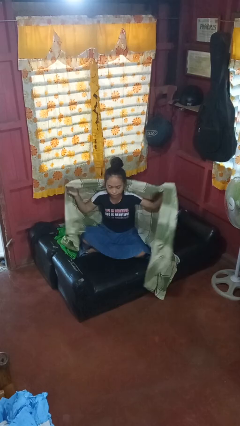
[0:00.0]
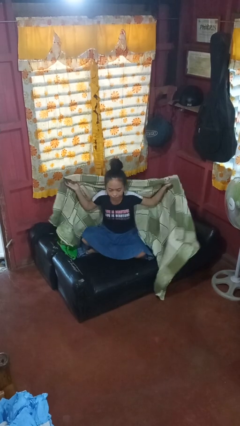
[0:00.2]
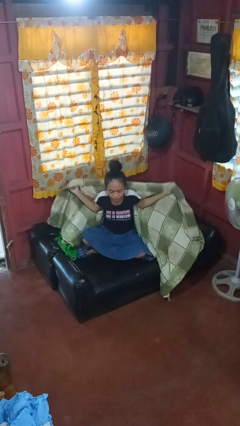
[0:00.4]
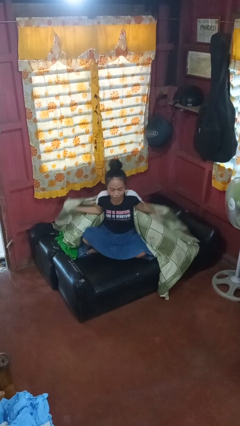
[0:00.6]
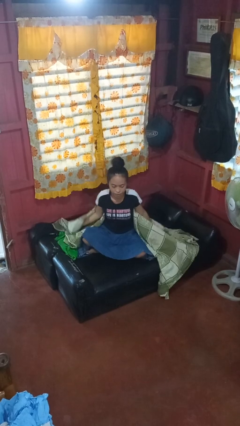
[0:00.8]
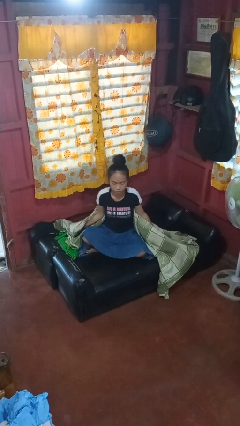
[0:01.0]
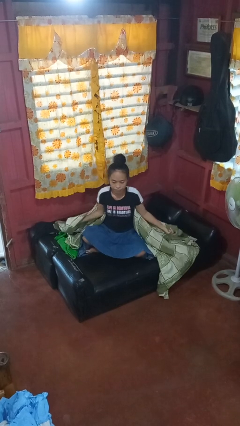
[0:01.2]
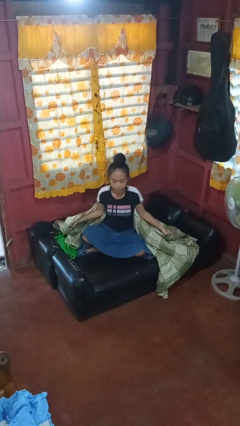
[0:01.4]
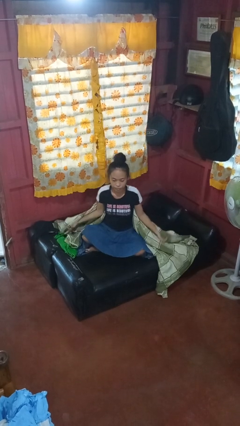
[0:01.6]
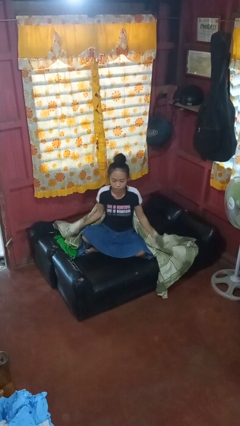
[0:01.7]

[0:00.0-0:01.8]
person uncovers with blanket

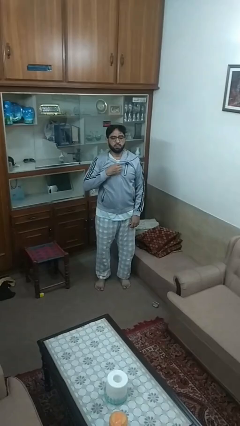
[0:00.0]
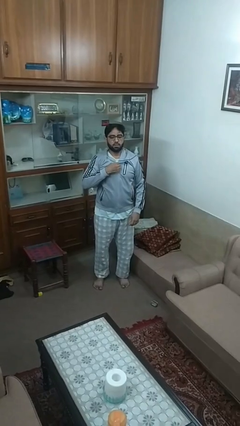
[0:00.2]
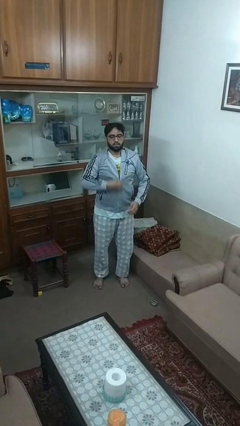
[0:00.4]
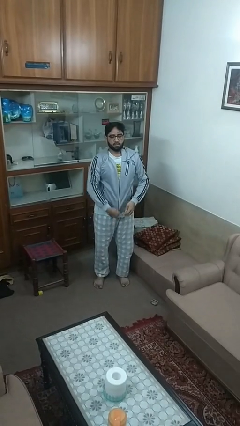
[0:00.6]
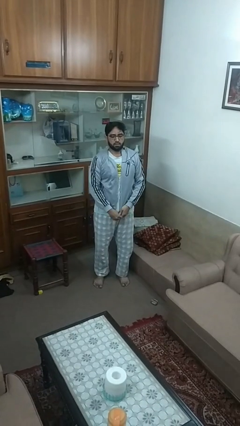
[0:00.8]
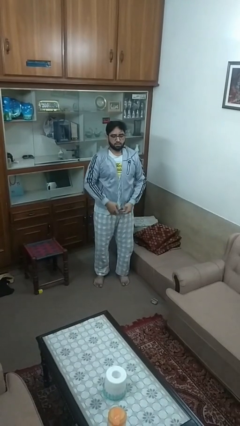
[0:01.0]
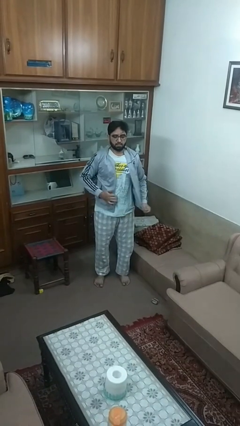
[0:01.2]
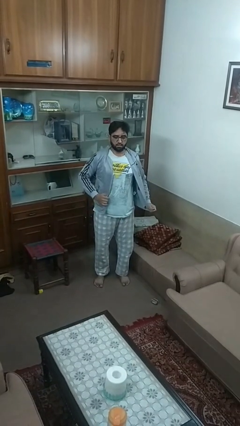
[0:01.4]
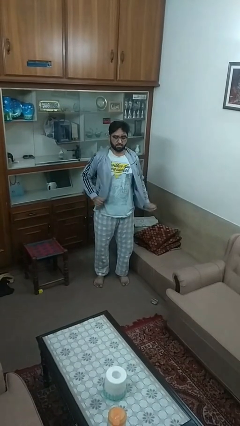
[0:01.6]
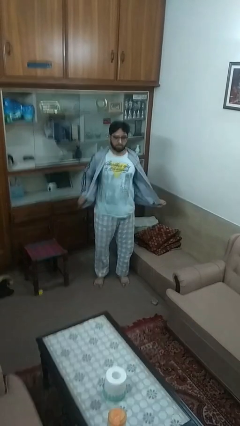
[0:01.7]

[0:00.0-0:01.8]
person unzips jacket

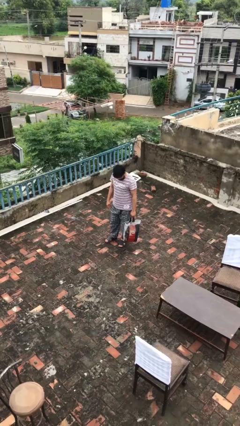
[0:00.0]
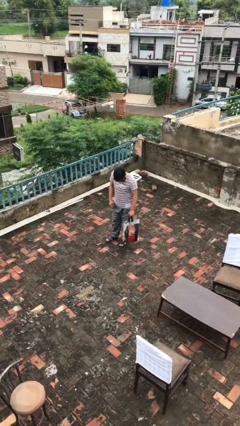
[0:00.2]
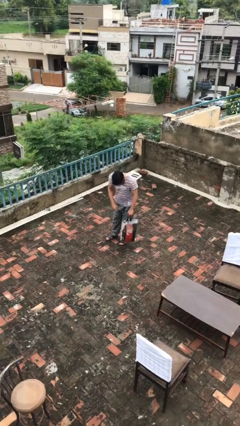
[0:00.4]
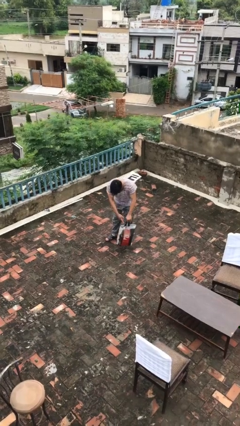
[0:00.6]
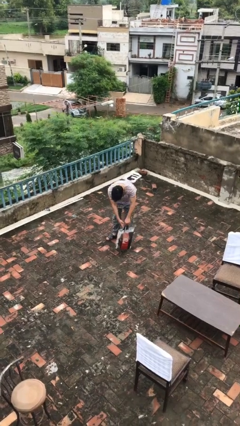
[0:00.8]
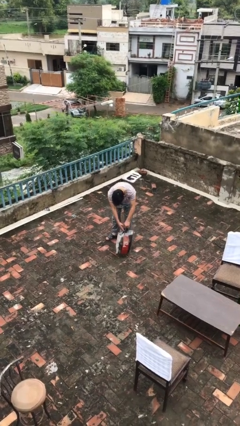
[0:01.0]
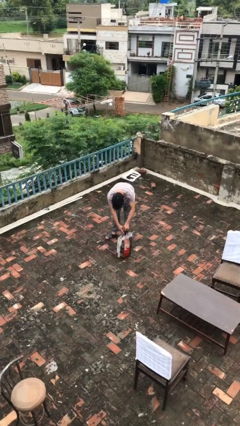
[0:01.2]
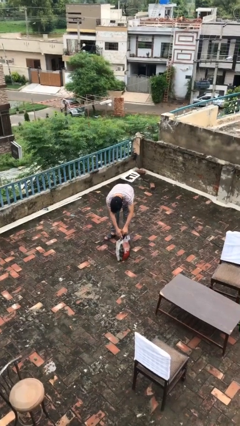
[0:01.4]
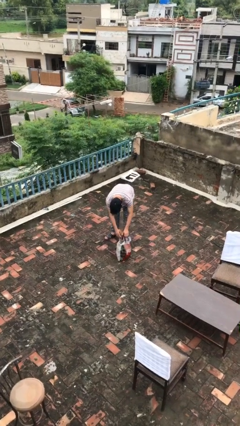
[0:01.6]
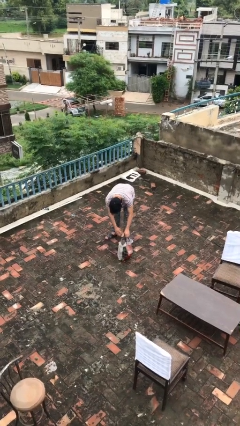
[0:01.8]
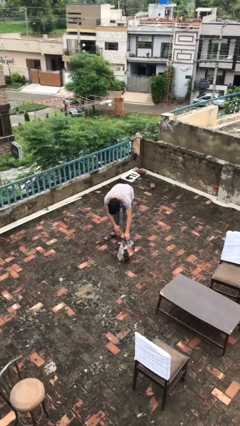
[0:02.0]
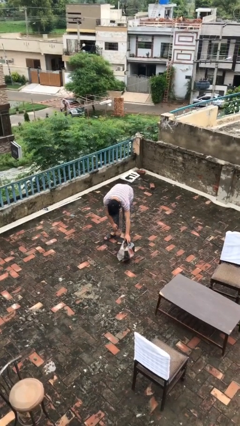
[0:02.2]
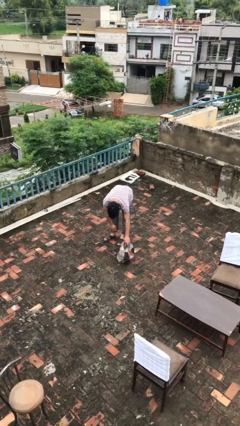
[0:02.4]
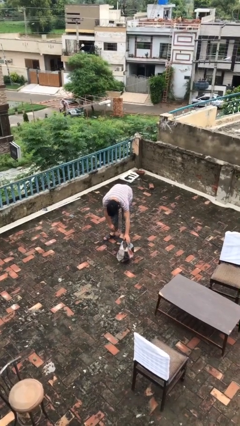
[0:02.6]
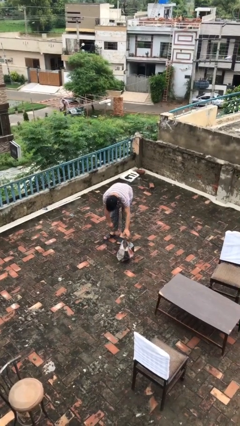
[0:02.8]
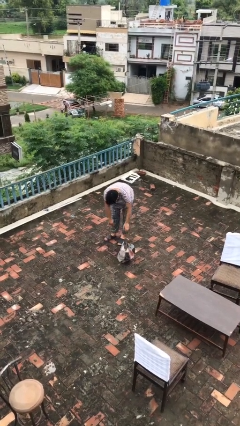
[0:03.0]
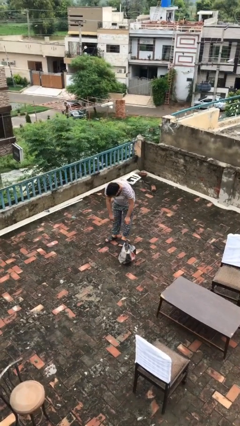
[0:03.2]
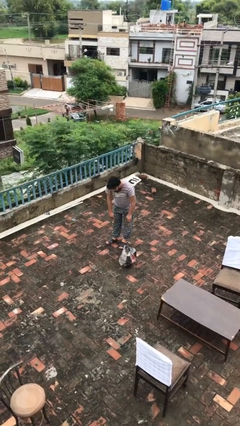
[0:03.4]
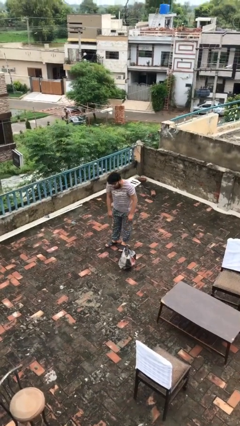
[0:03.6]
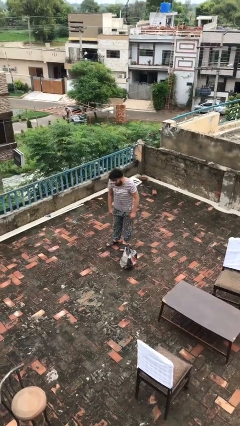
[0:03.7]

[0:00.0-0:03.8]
person puts down object on floor

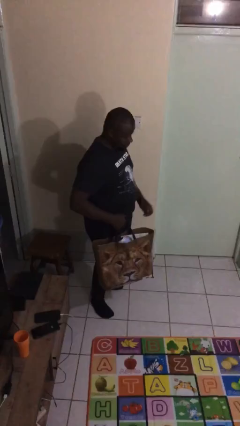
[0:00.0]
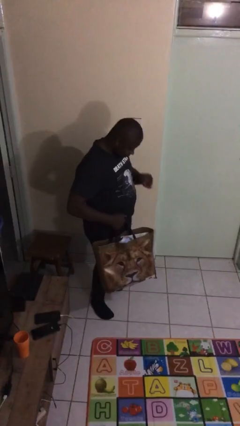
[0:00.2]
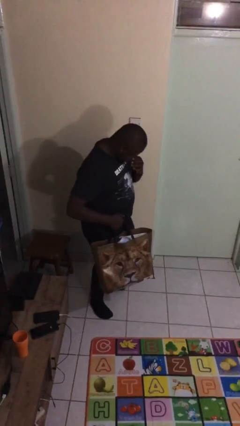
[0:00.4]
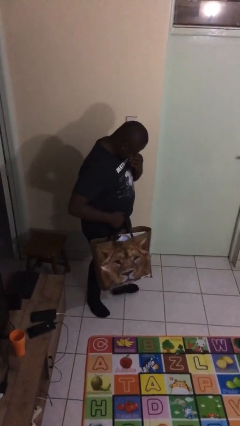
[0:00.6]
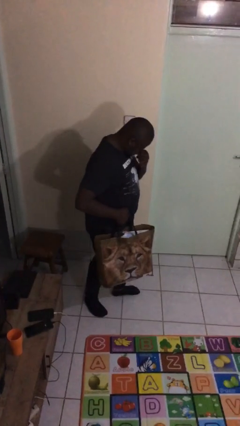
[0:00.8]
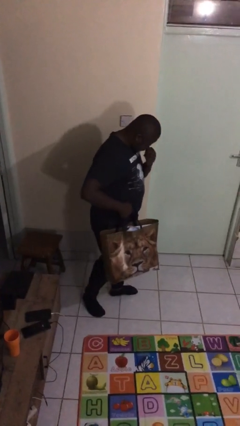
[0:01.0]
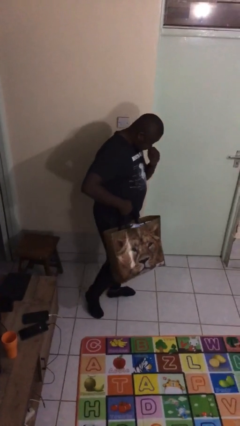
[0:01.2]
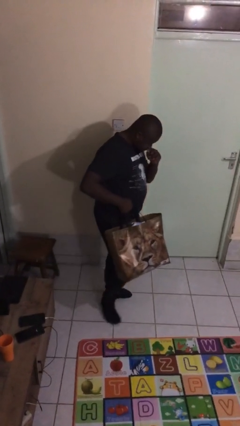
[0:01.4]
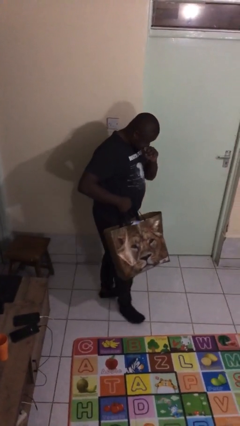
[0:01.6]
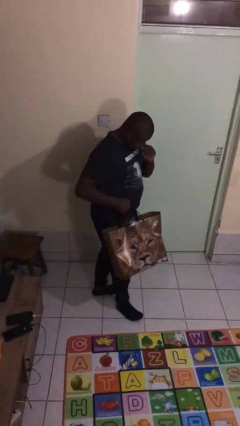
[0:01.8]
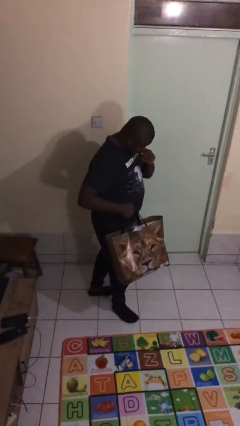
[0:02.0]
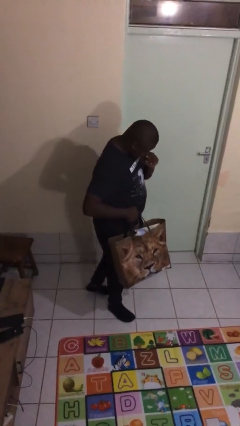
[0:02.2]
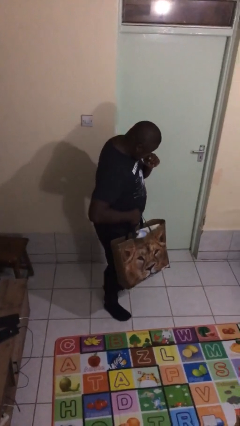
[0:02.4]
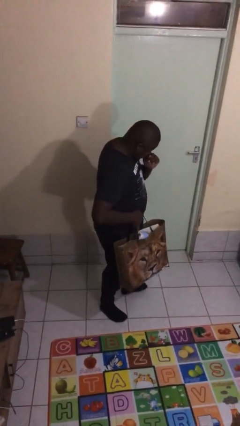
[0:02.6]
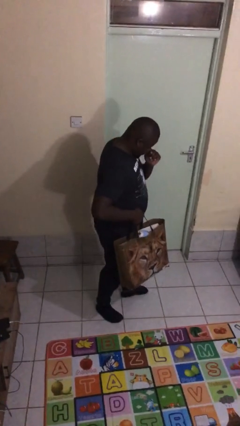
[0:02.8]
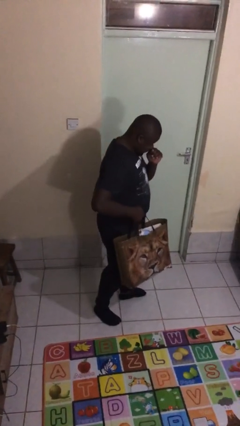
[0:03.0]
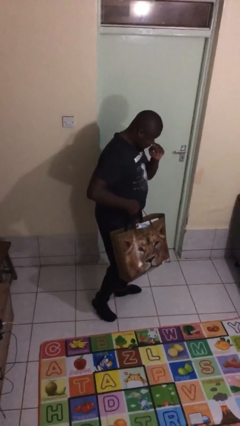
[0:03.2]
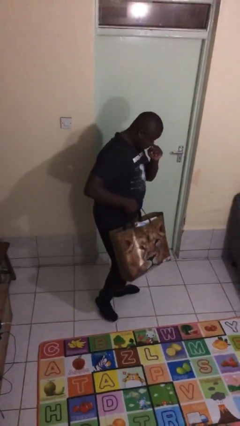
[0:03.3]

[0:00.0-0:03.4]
person carries groceries

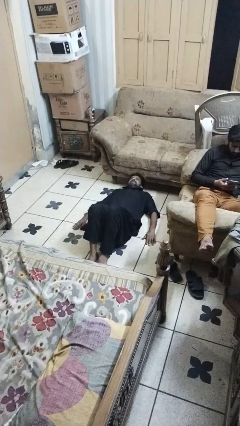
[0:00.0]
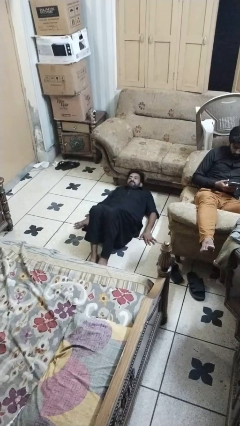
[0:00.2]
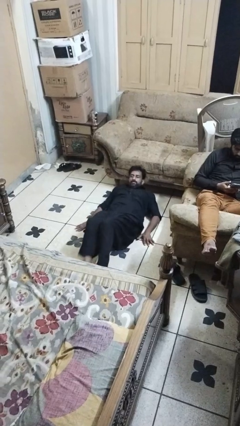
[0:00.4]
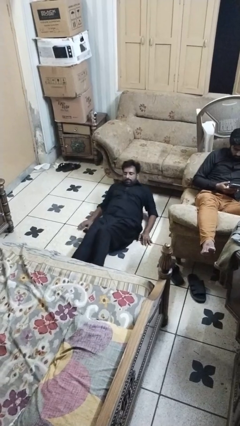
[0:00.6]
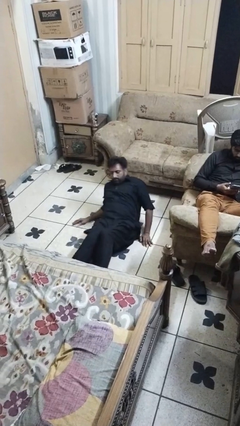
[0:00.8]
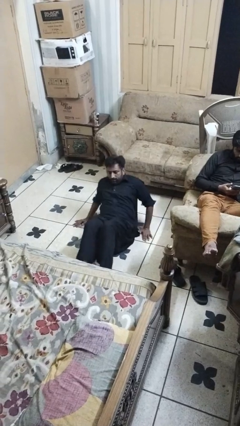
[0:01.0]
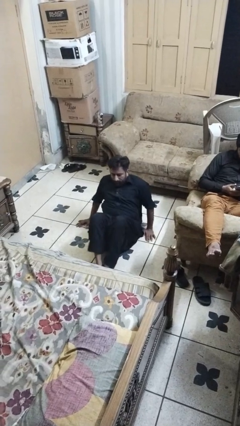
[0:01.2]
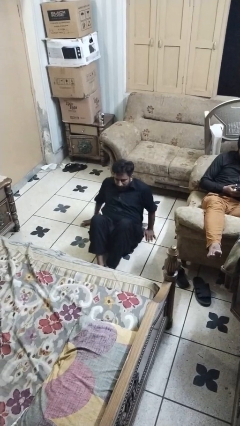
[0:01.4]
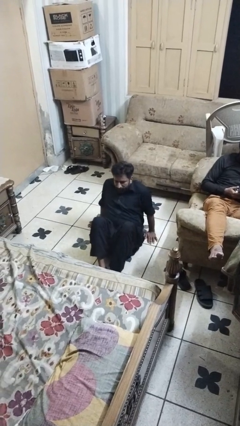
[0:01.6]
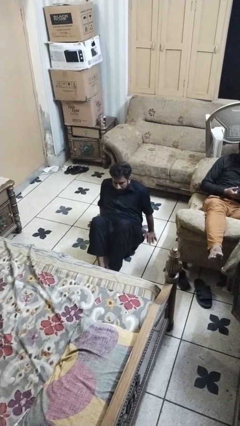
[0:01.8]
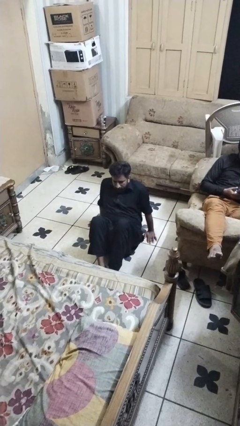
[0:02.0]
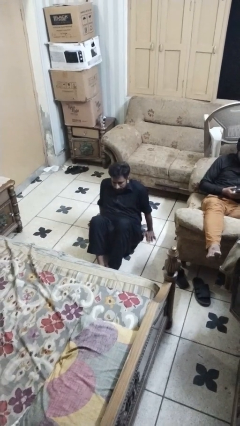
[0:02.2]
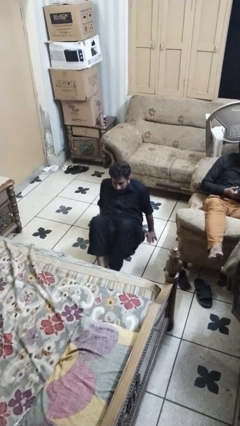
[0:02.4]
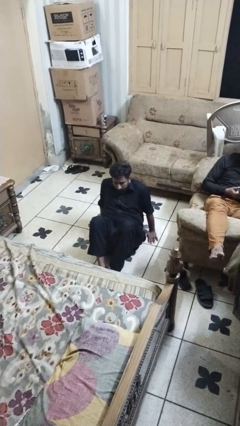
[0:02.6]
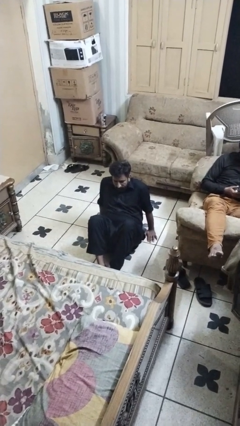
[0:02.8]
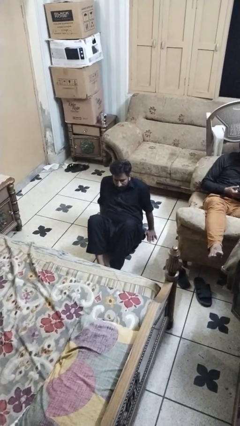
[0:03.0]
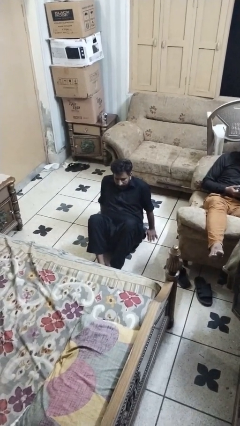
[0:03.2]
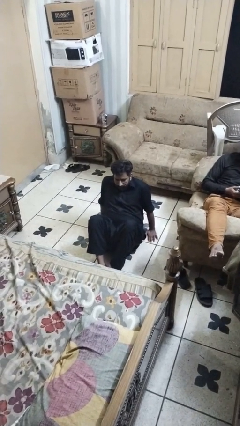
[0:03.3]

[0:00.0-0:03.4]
person exercises with situp

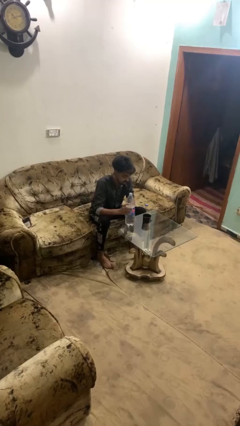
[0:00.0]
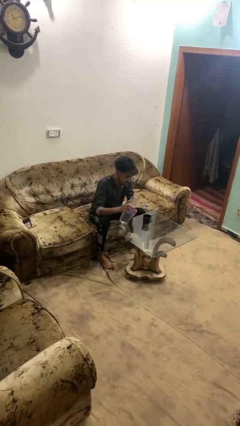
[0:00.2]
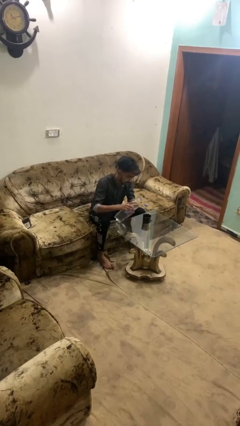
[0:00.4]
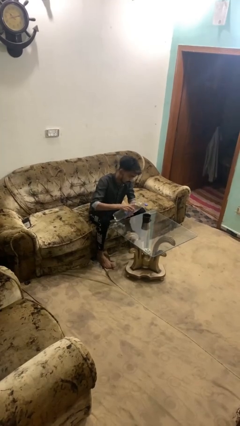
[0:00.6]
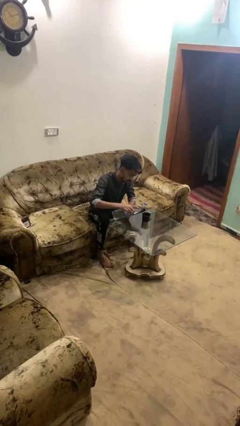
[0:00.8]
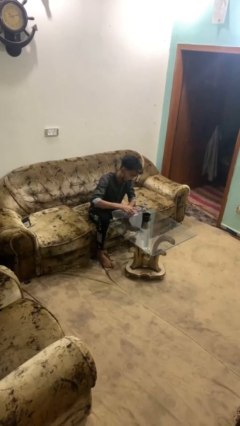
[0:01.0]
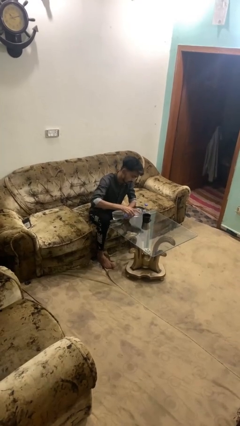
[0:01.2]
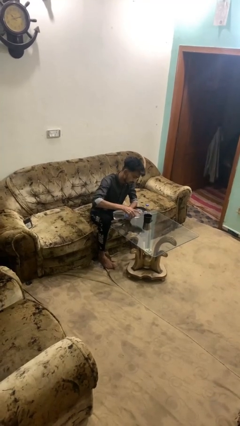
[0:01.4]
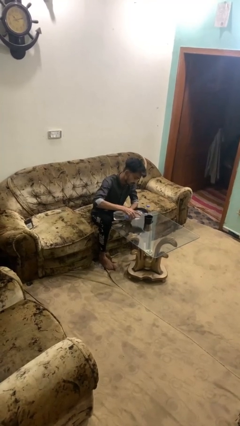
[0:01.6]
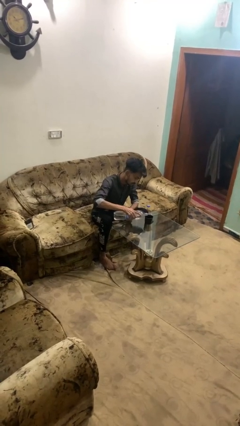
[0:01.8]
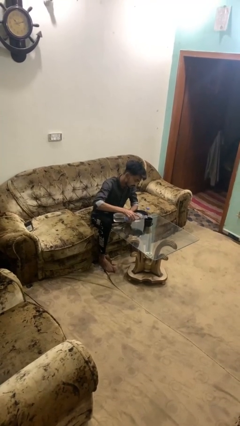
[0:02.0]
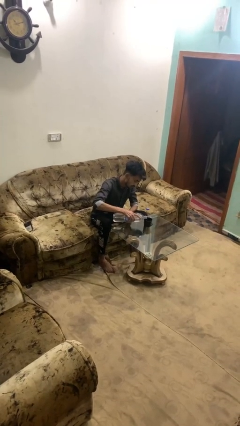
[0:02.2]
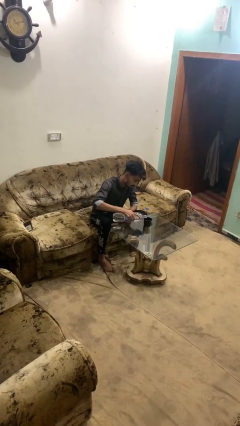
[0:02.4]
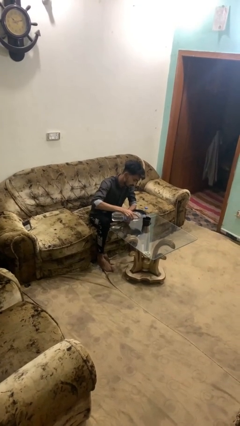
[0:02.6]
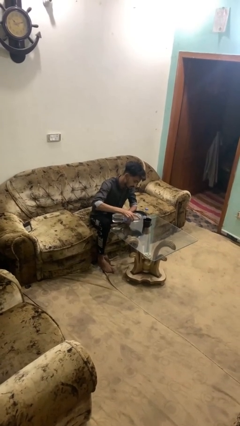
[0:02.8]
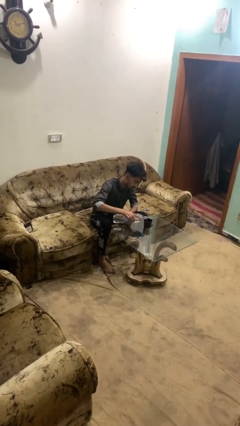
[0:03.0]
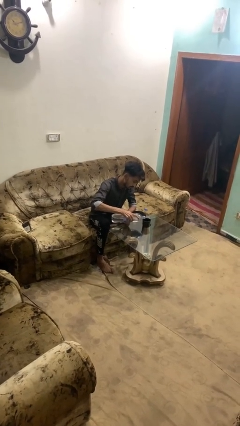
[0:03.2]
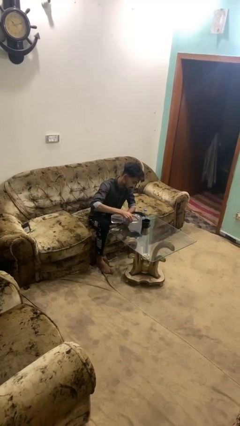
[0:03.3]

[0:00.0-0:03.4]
person pours liquid into cup
